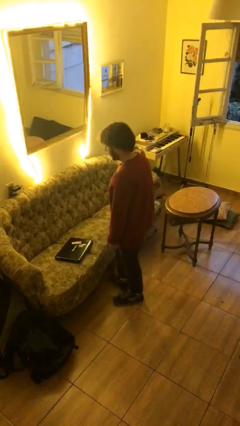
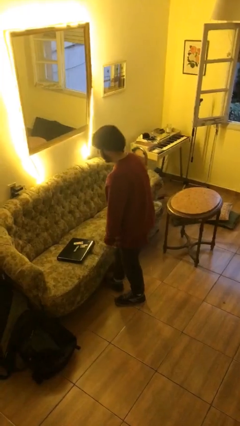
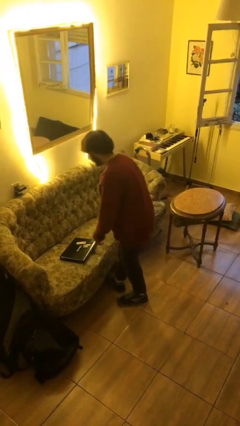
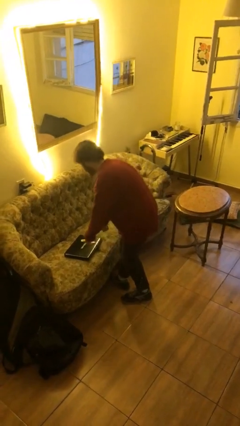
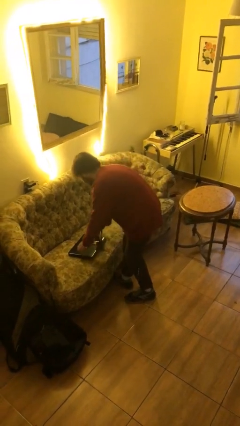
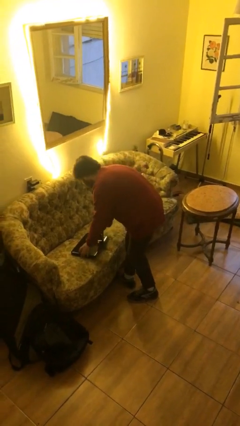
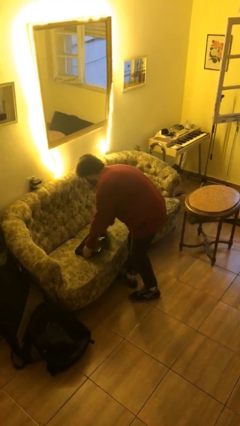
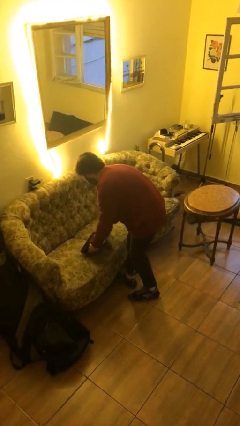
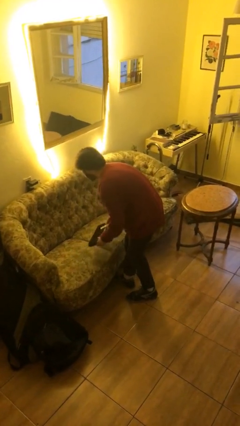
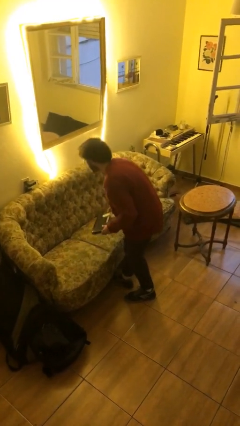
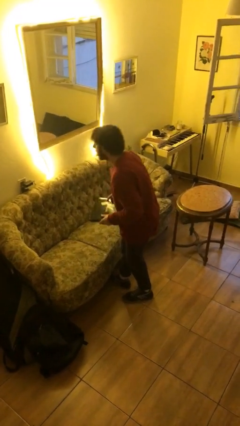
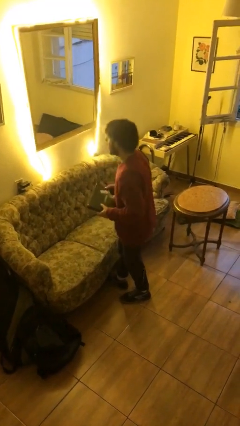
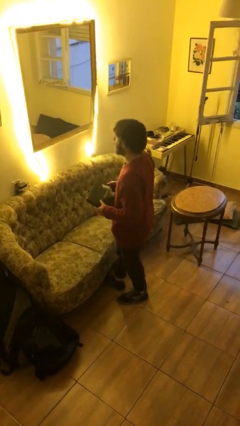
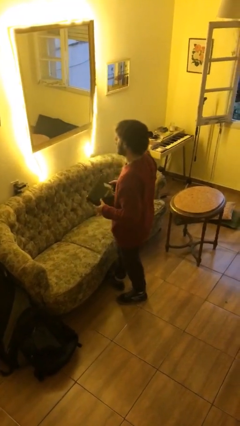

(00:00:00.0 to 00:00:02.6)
person picks up object from couch

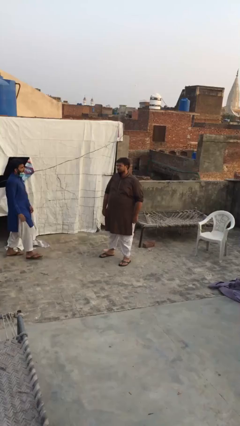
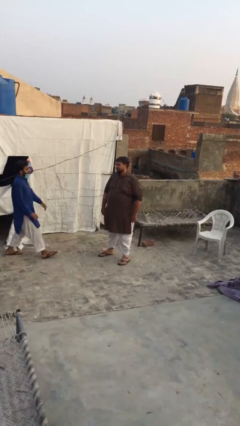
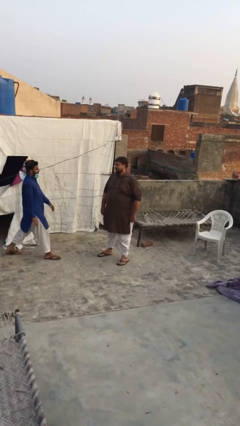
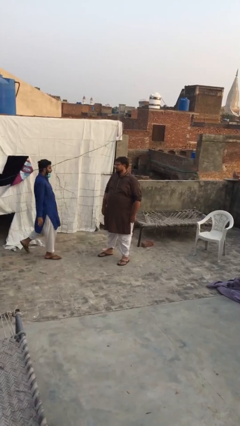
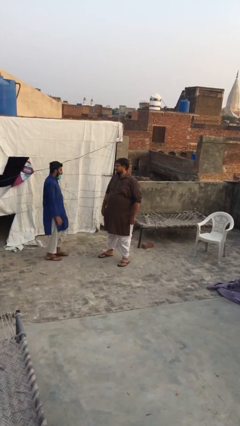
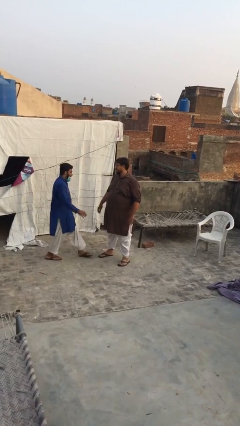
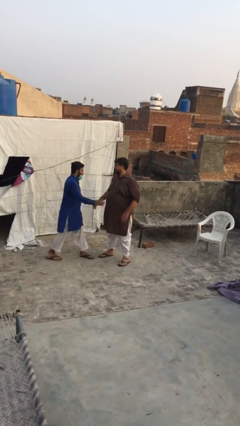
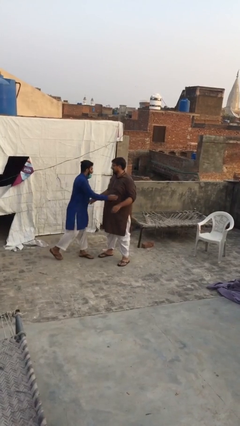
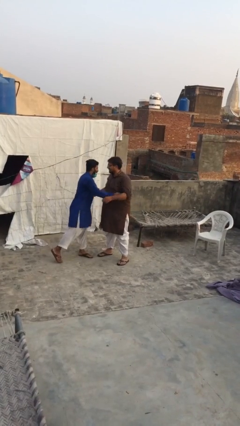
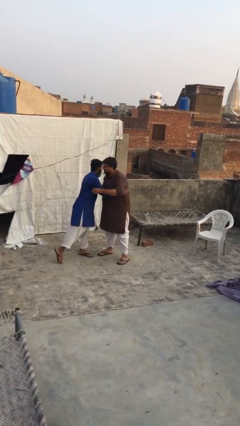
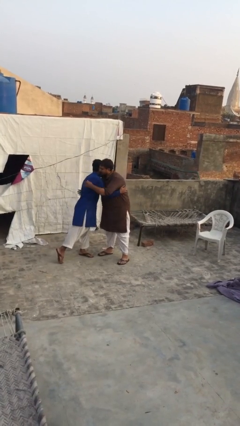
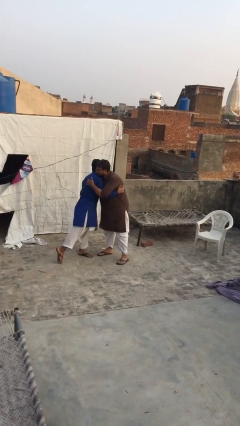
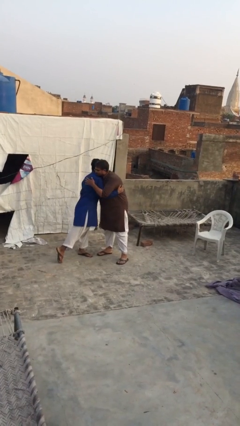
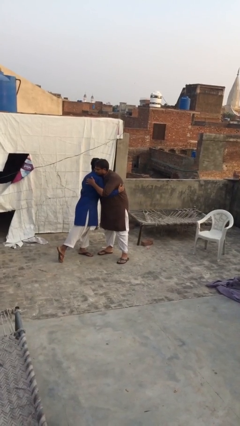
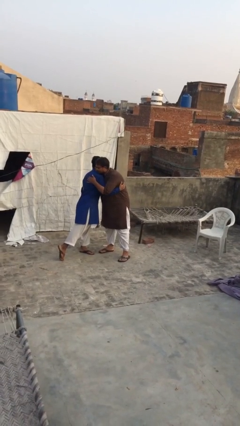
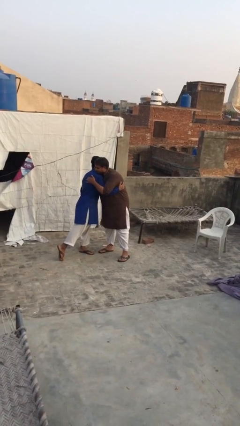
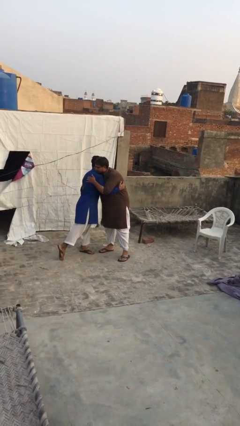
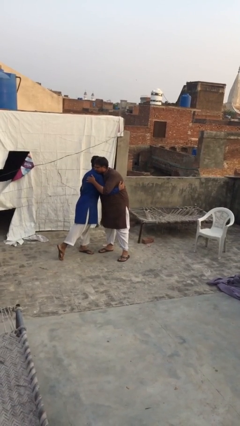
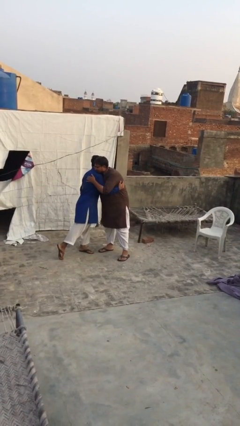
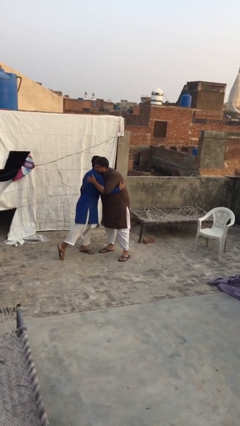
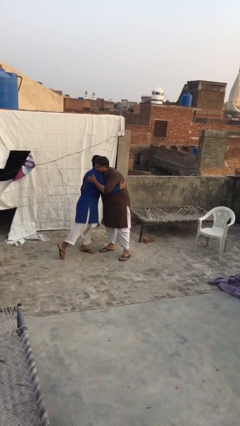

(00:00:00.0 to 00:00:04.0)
person embraces person

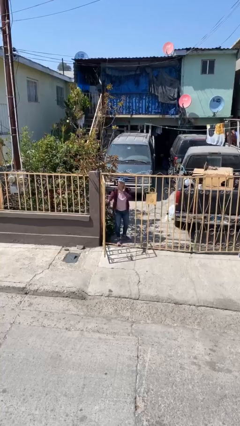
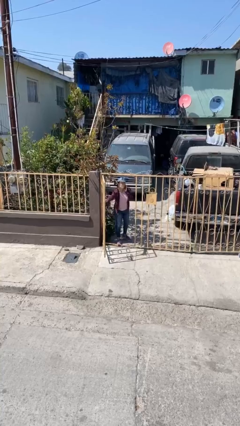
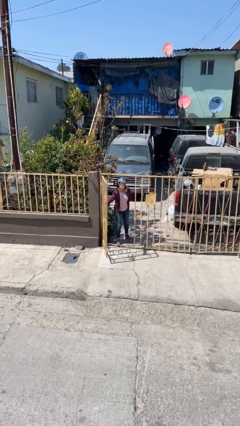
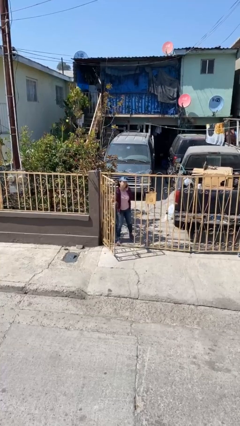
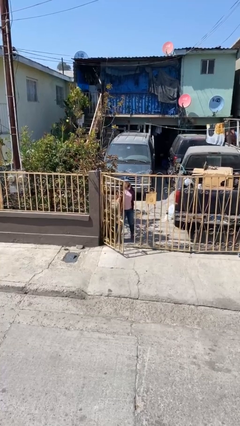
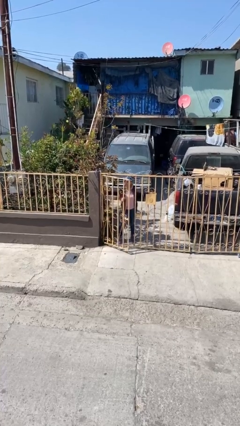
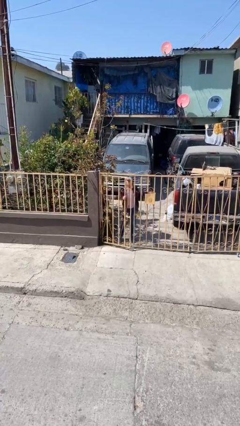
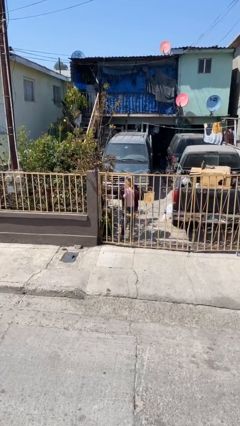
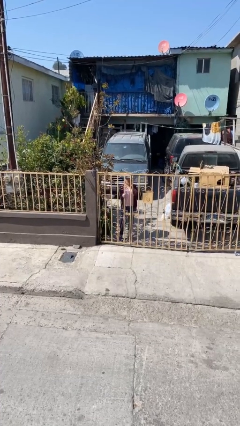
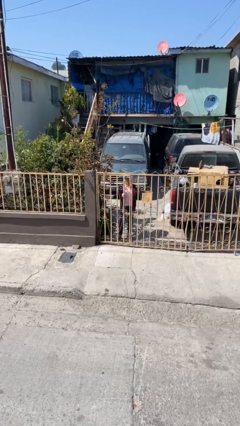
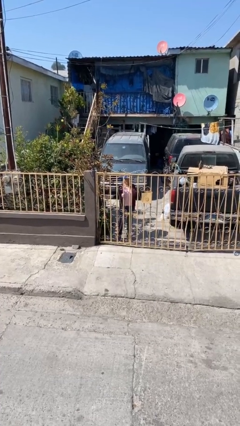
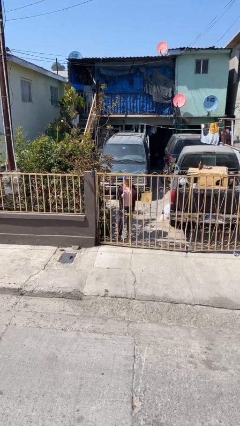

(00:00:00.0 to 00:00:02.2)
person closes facility door

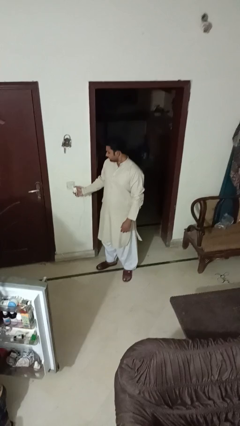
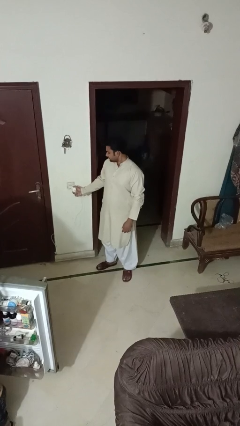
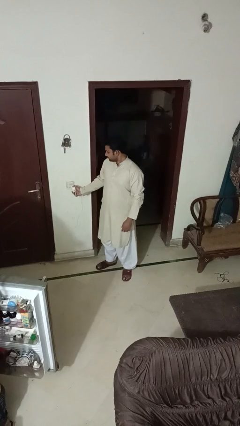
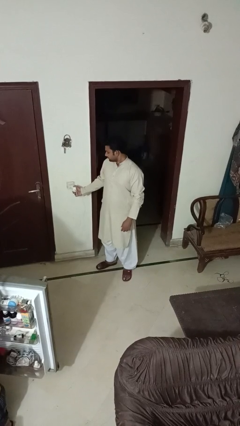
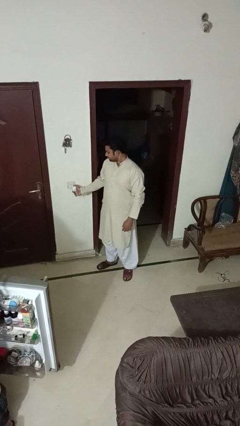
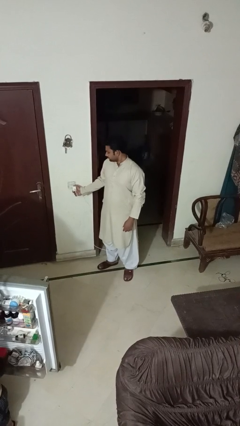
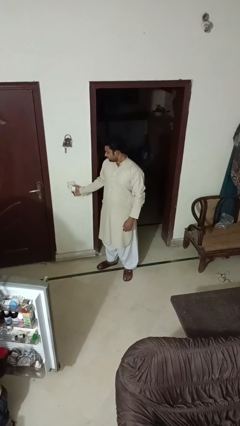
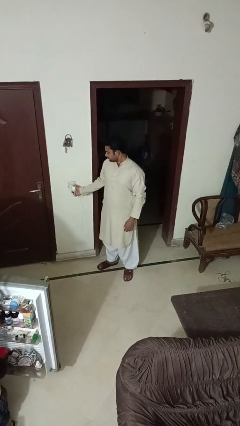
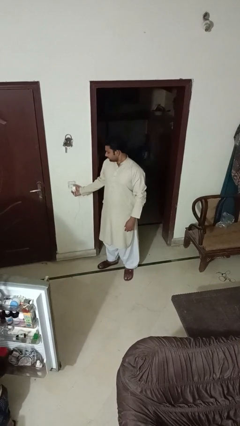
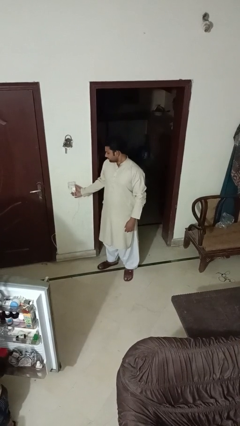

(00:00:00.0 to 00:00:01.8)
person plugs into electrical socket

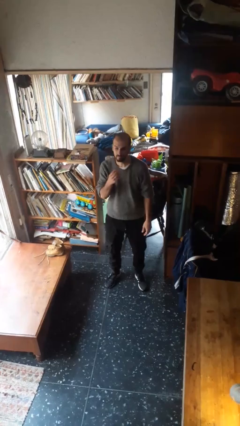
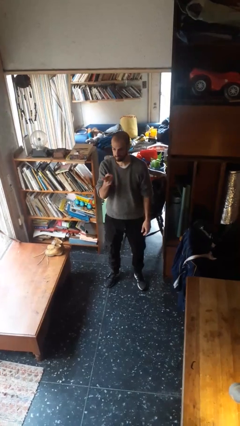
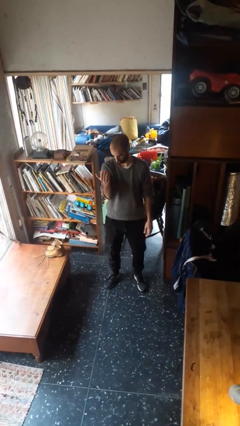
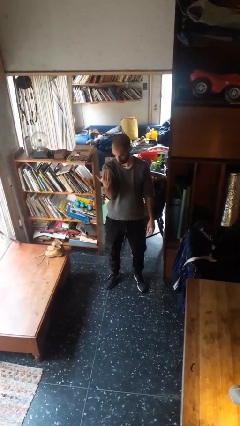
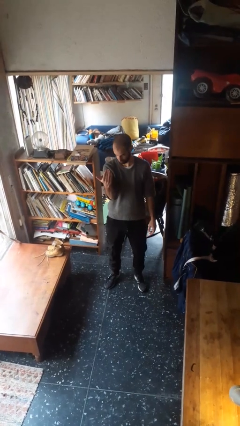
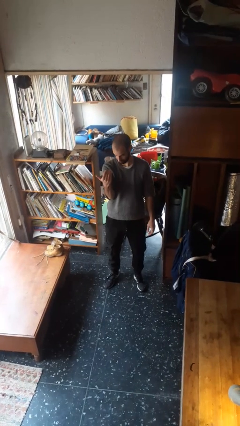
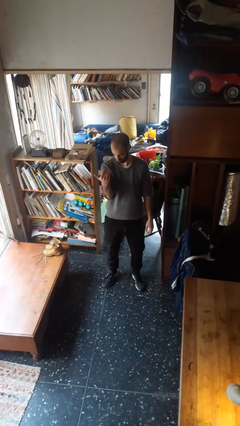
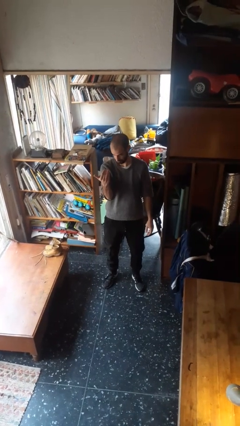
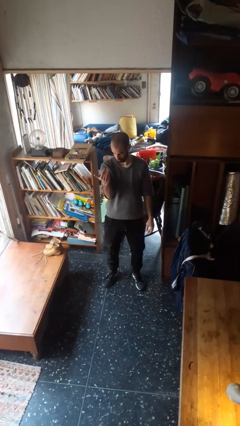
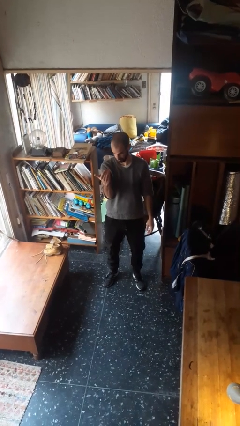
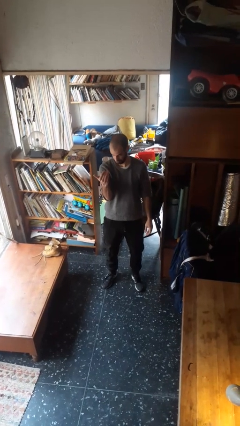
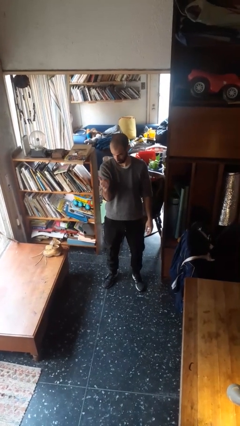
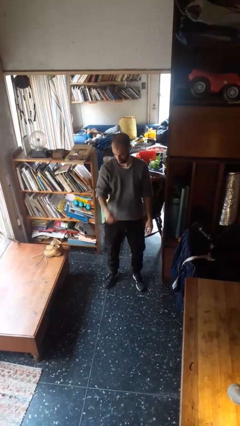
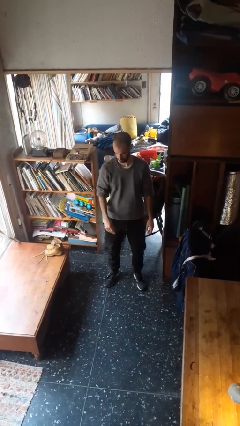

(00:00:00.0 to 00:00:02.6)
person gestures come here

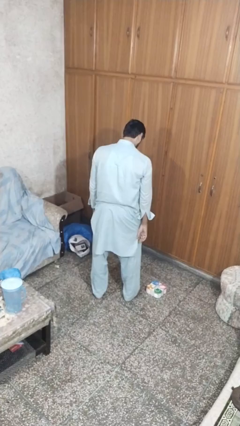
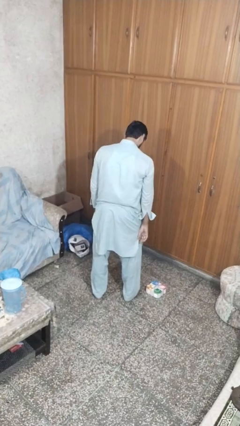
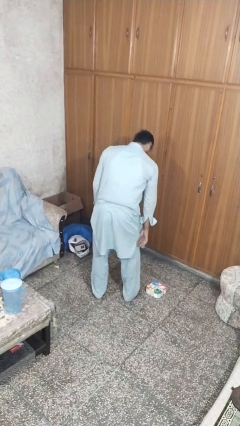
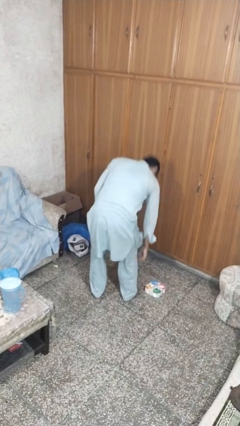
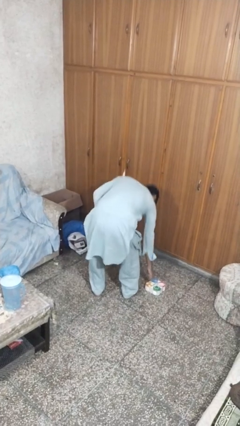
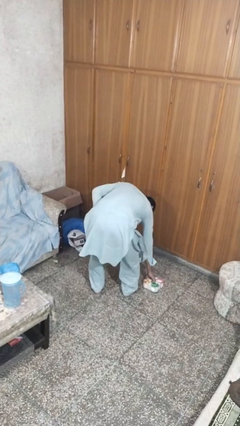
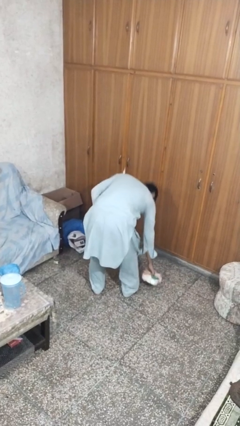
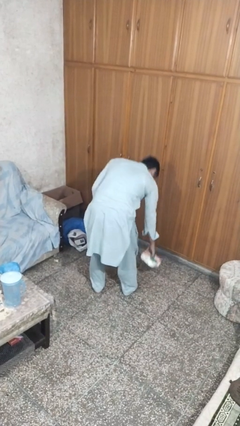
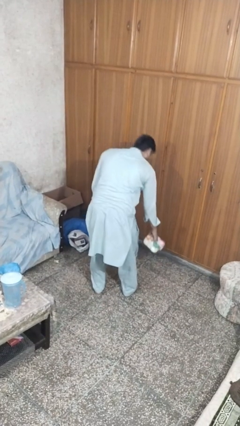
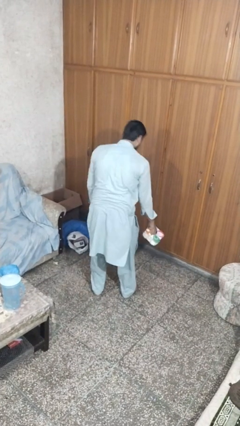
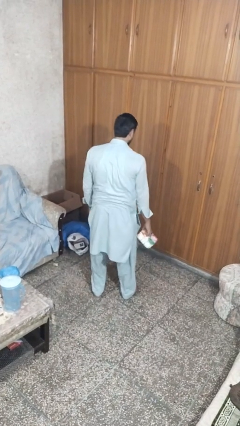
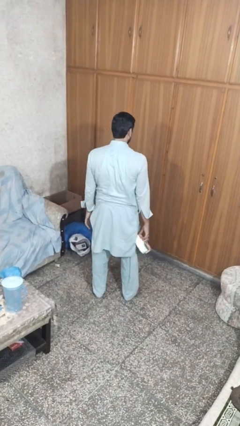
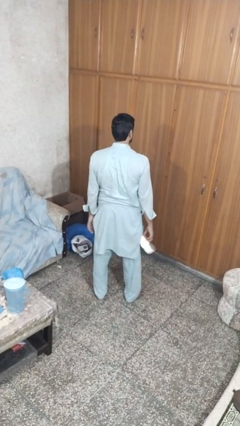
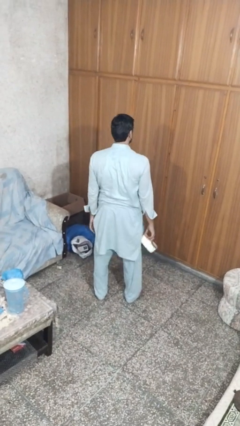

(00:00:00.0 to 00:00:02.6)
person picks up object from floor

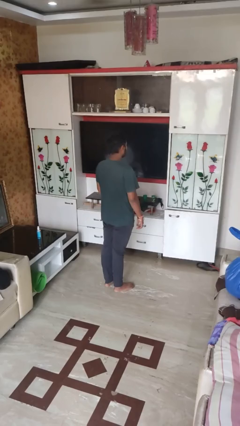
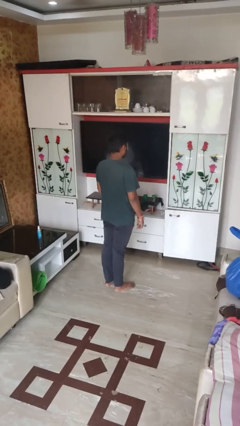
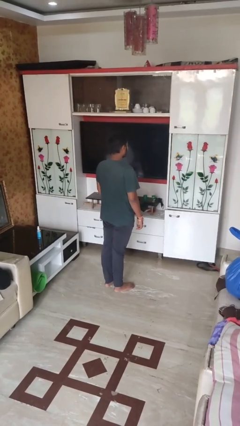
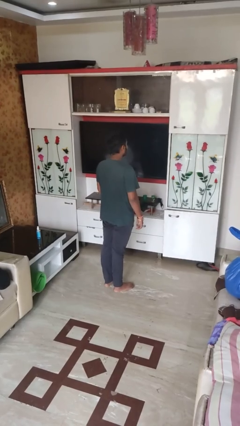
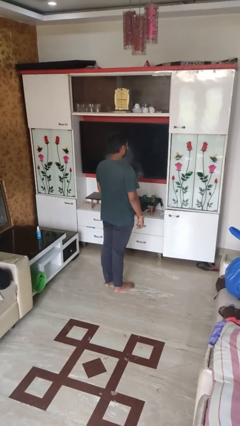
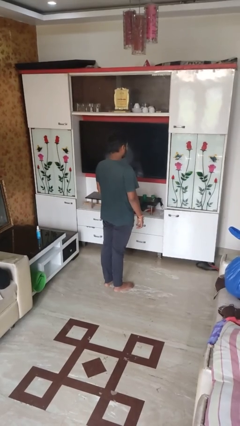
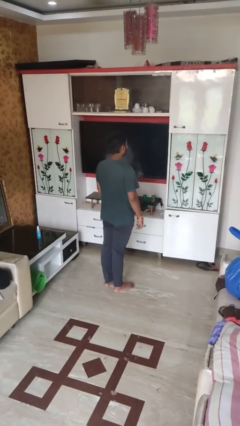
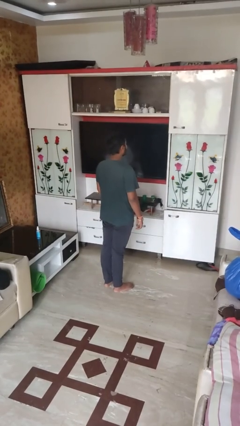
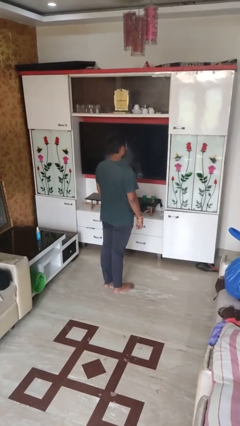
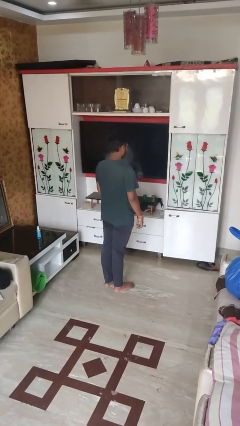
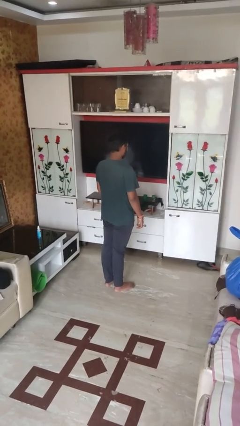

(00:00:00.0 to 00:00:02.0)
person nods head
